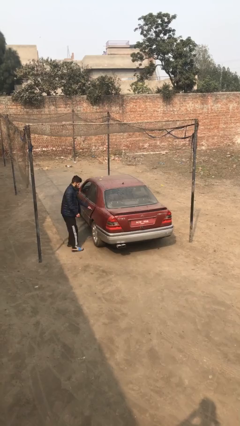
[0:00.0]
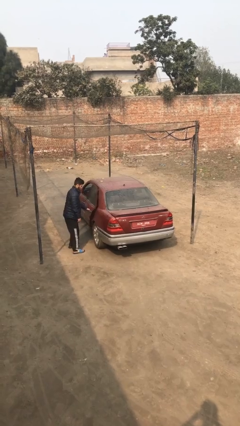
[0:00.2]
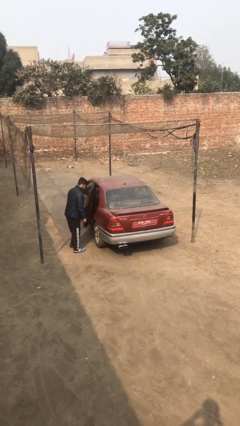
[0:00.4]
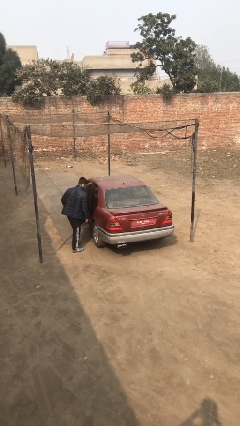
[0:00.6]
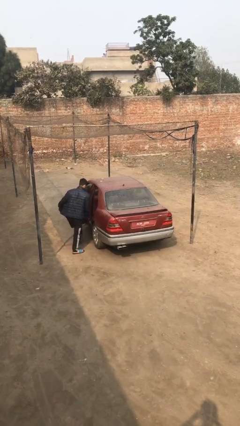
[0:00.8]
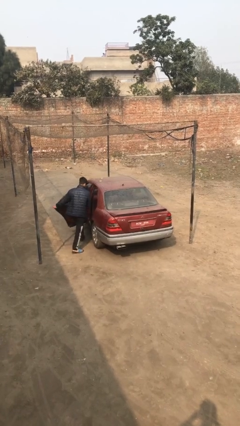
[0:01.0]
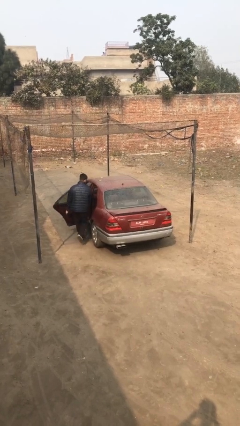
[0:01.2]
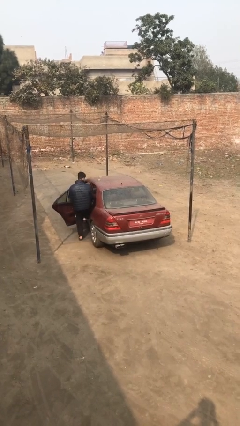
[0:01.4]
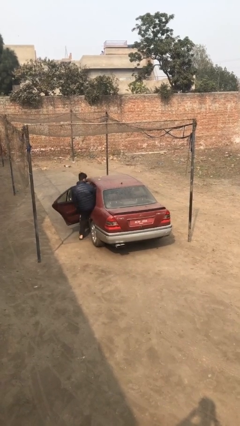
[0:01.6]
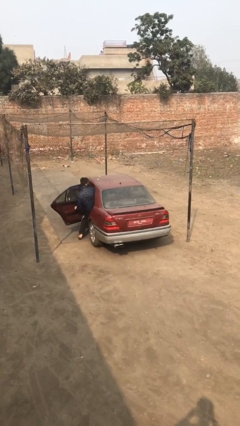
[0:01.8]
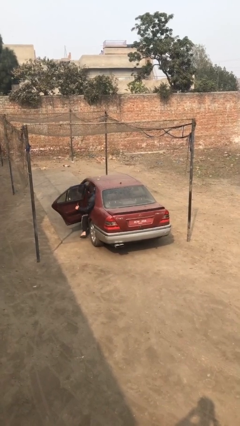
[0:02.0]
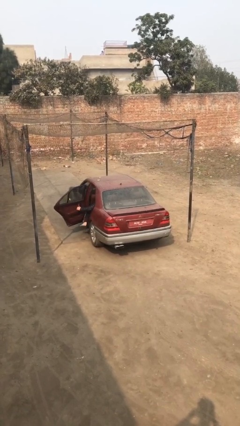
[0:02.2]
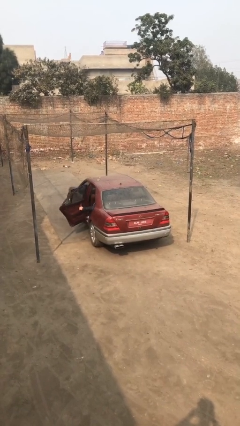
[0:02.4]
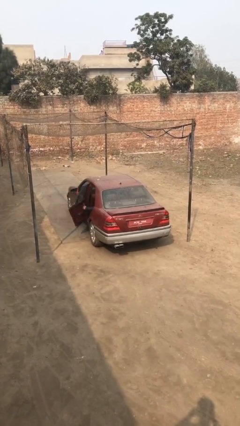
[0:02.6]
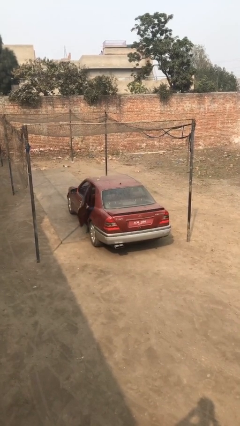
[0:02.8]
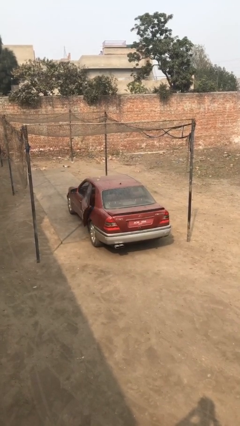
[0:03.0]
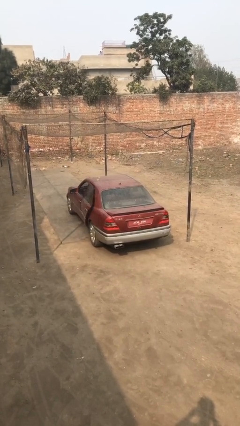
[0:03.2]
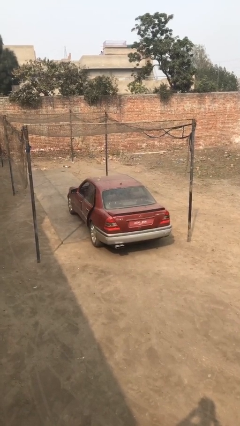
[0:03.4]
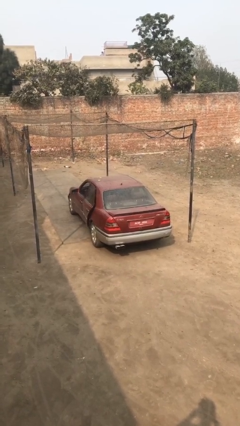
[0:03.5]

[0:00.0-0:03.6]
car picks up person

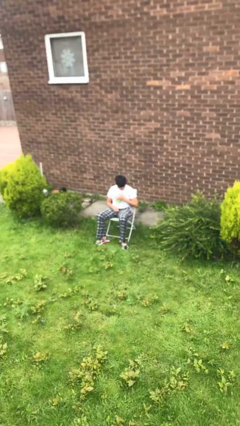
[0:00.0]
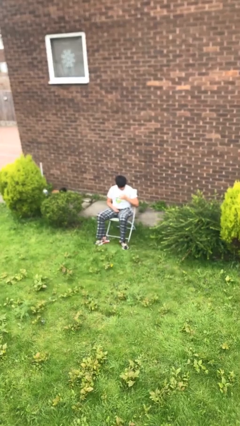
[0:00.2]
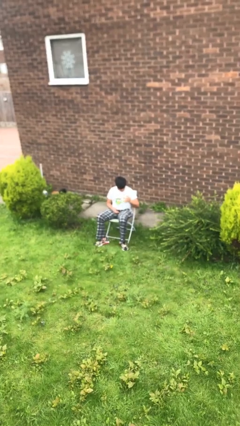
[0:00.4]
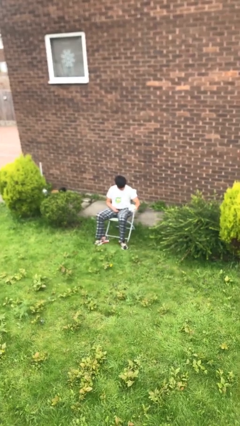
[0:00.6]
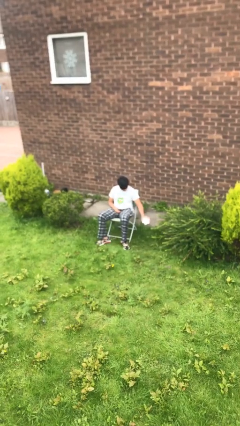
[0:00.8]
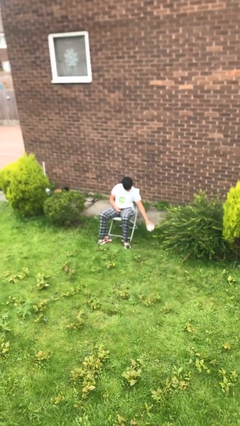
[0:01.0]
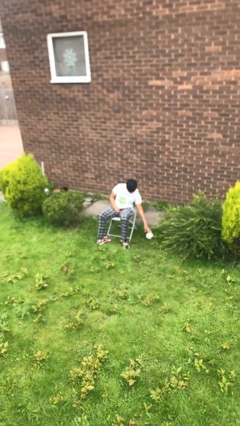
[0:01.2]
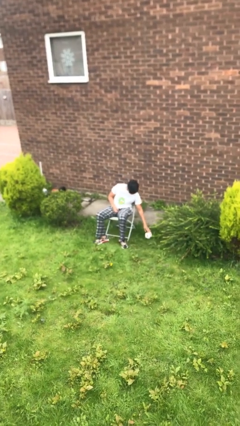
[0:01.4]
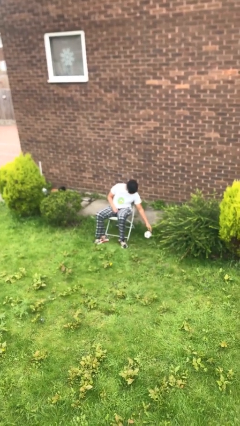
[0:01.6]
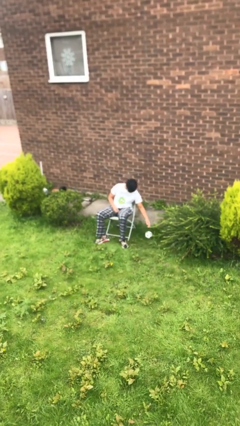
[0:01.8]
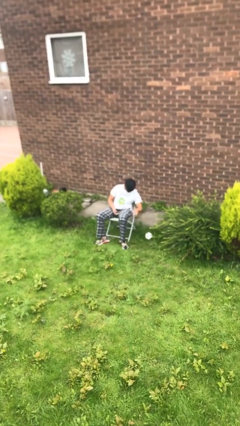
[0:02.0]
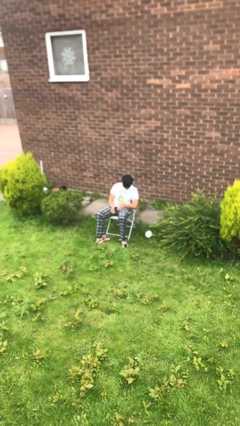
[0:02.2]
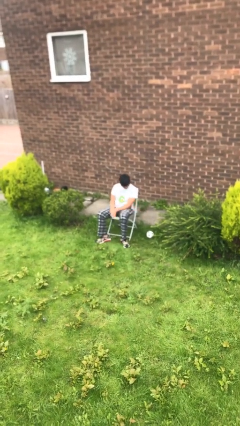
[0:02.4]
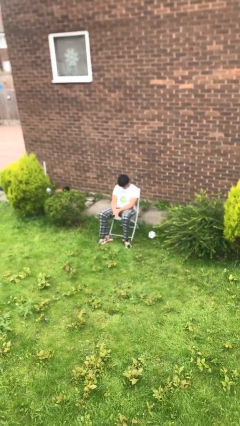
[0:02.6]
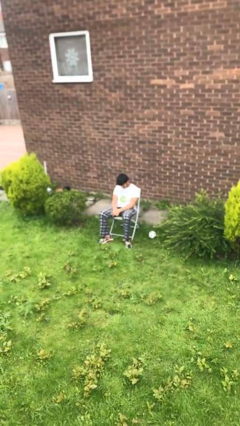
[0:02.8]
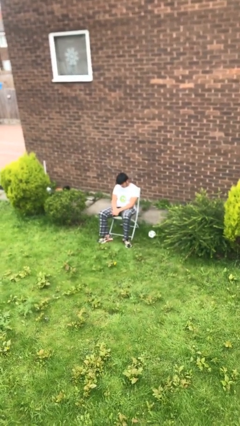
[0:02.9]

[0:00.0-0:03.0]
person puts down object on floor

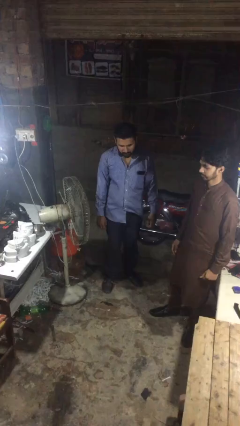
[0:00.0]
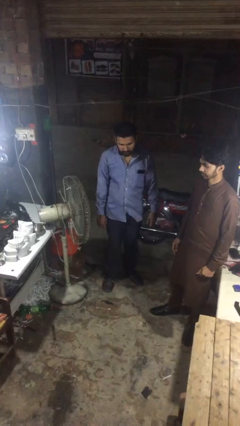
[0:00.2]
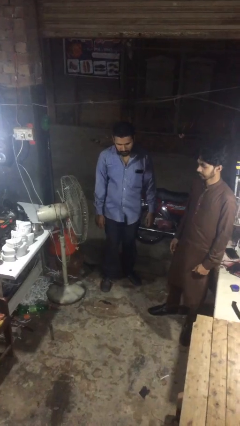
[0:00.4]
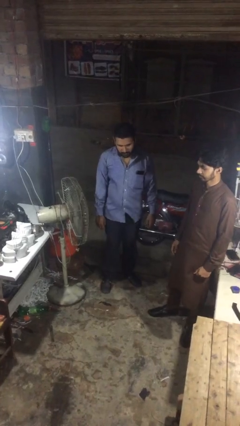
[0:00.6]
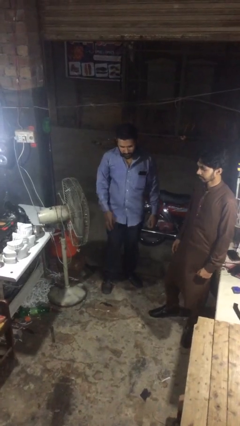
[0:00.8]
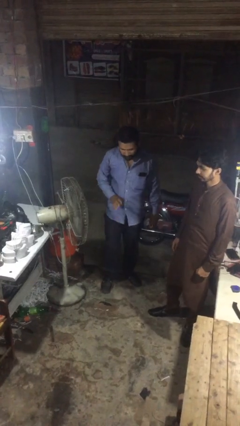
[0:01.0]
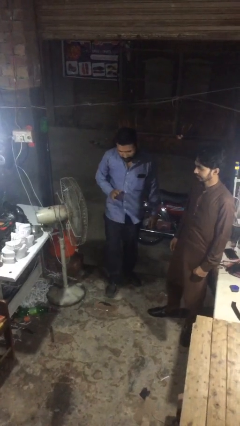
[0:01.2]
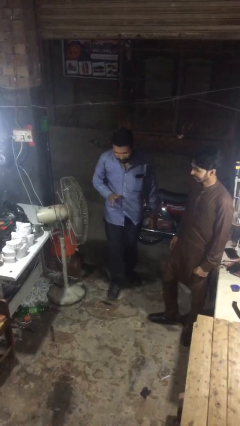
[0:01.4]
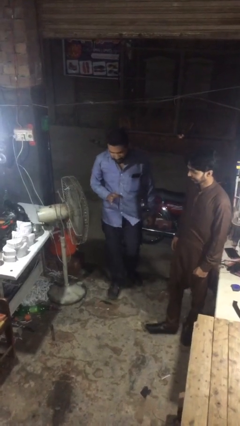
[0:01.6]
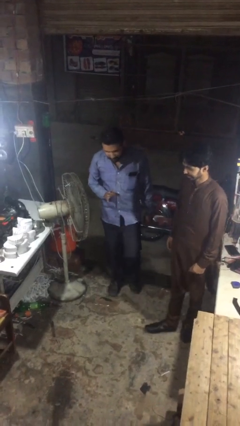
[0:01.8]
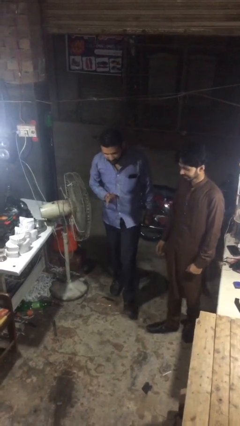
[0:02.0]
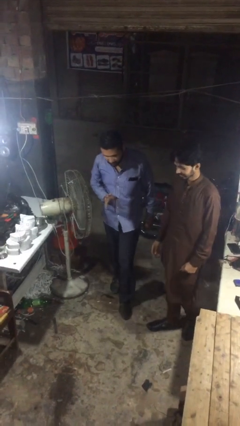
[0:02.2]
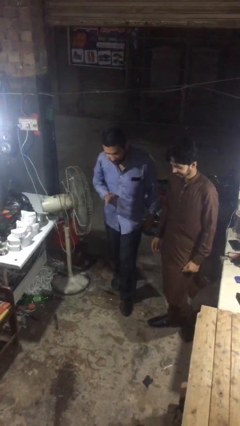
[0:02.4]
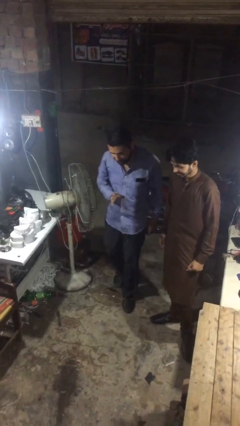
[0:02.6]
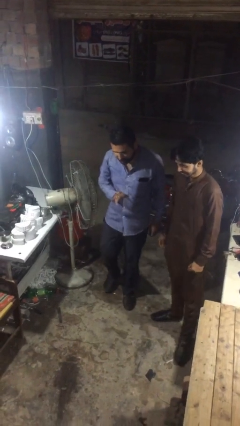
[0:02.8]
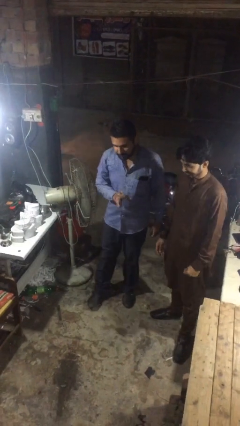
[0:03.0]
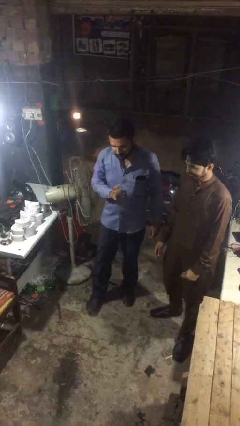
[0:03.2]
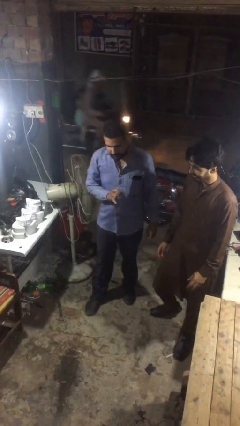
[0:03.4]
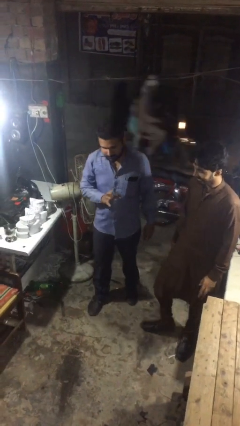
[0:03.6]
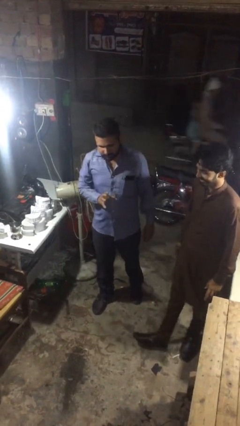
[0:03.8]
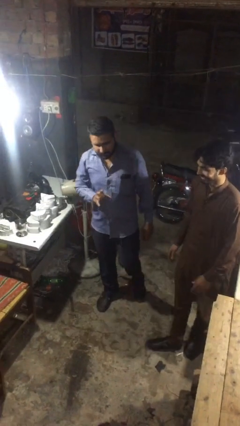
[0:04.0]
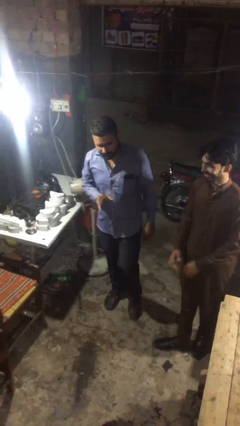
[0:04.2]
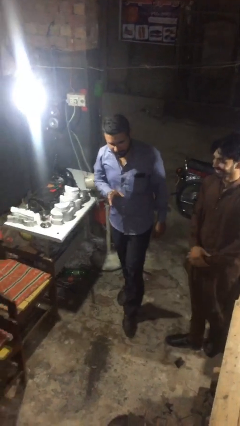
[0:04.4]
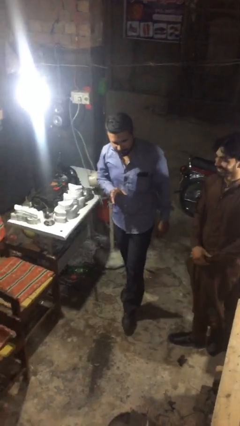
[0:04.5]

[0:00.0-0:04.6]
person talks to person

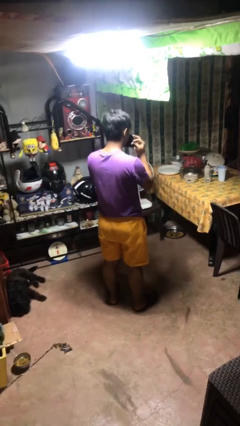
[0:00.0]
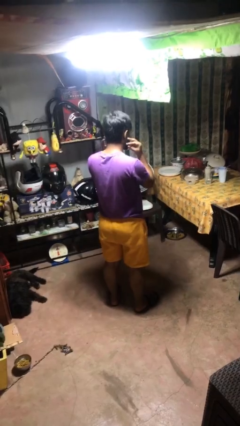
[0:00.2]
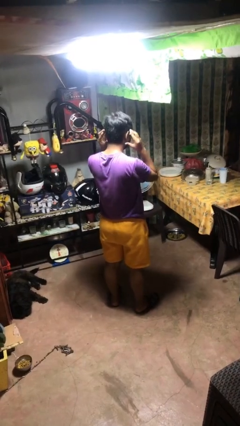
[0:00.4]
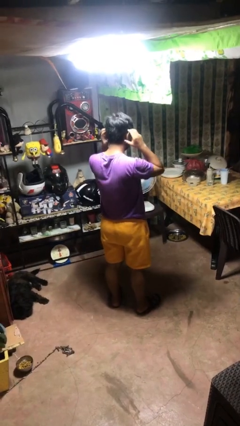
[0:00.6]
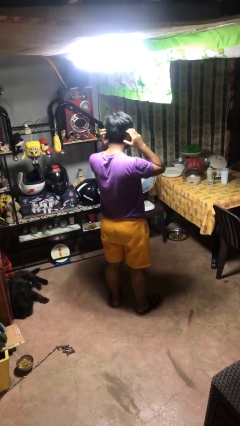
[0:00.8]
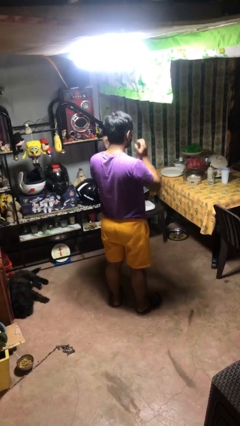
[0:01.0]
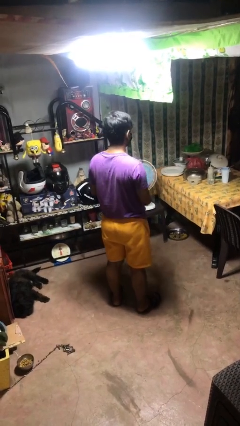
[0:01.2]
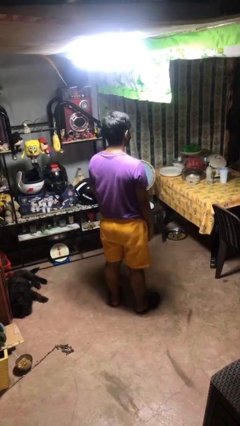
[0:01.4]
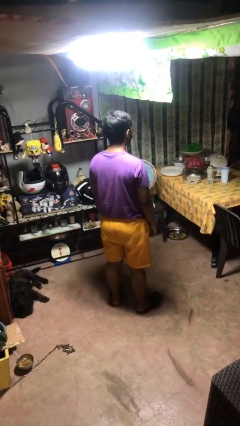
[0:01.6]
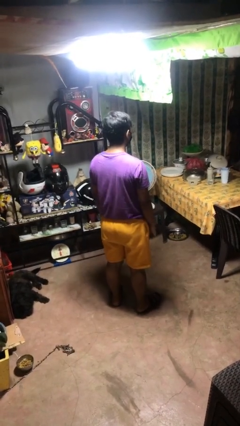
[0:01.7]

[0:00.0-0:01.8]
person puts on facemask

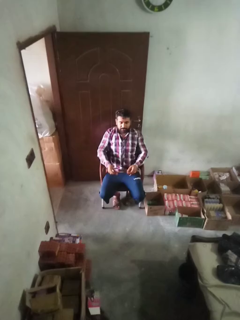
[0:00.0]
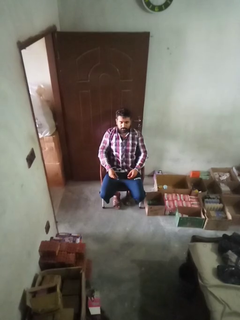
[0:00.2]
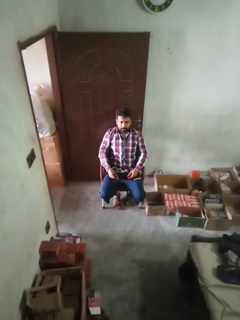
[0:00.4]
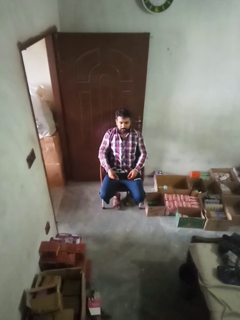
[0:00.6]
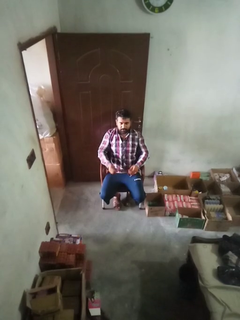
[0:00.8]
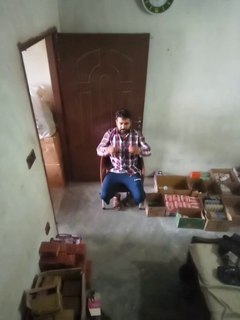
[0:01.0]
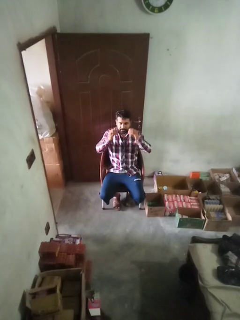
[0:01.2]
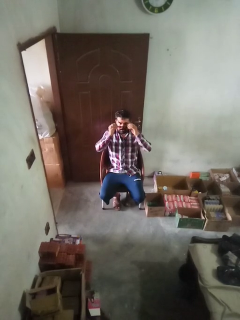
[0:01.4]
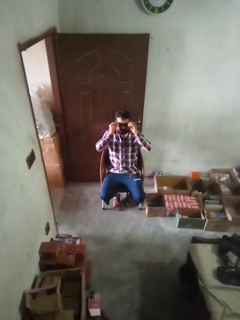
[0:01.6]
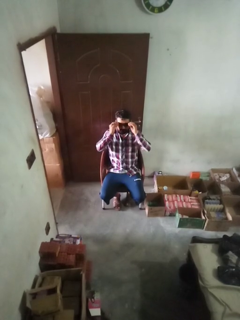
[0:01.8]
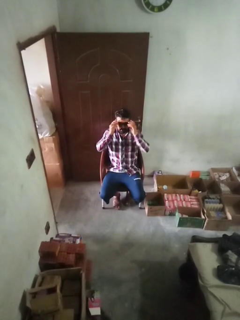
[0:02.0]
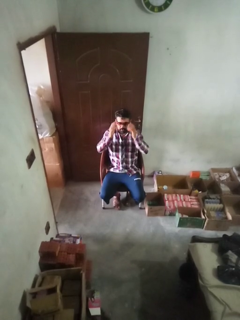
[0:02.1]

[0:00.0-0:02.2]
person puts on sunglasses

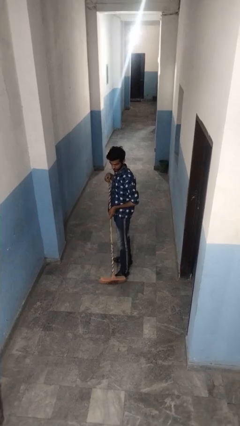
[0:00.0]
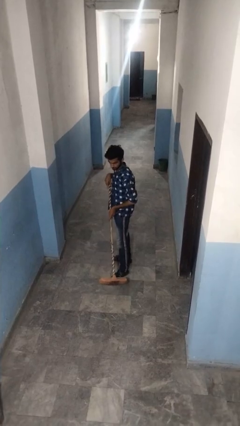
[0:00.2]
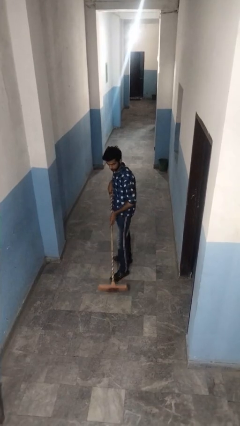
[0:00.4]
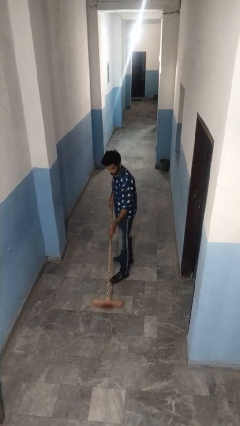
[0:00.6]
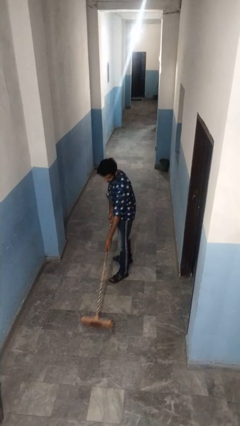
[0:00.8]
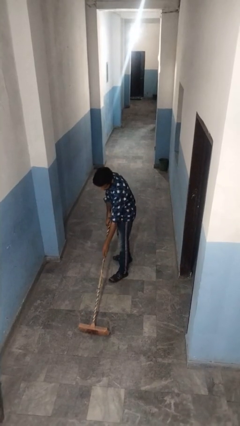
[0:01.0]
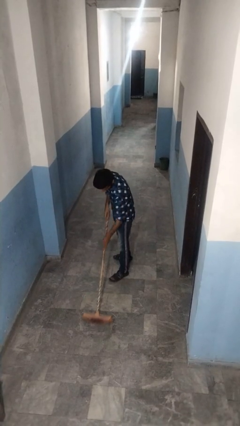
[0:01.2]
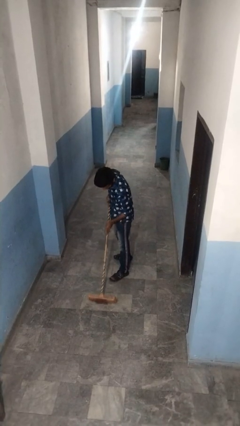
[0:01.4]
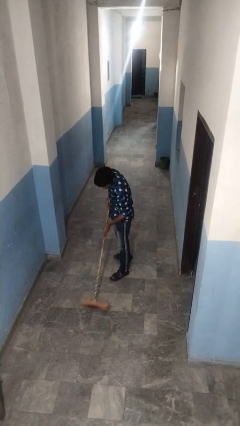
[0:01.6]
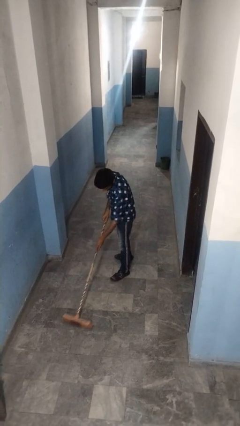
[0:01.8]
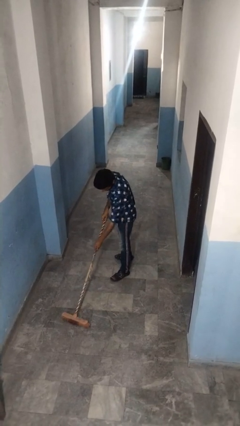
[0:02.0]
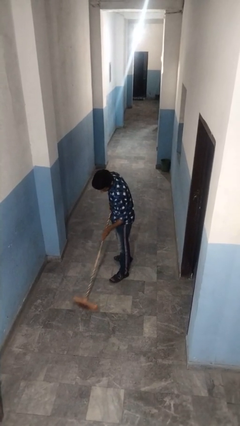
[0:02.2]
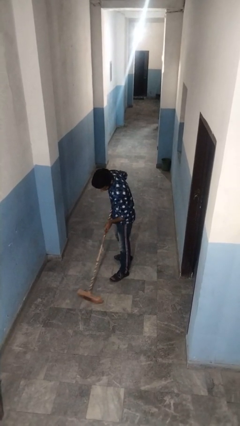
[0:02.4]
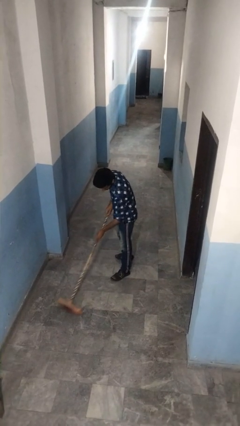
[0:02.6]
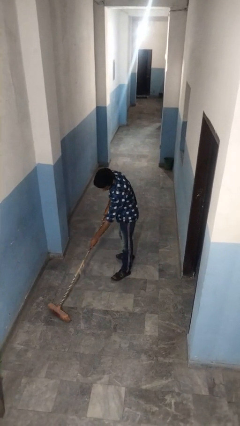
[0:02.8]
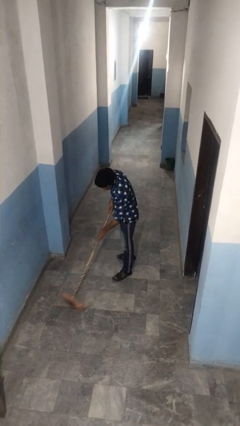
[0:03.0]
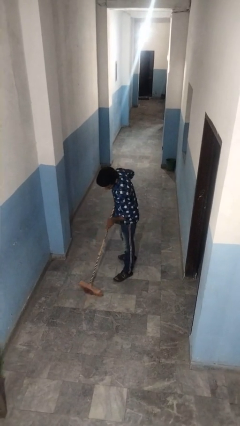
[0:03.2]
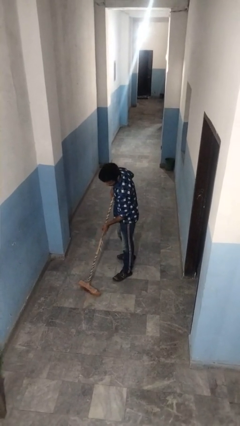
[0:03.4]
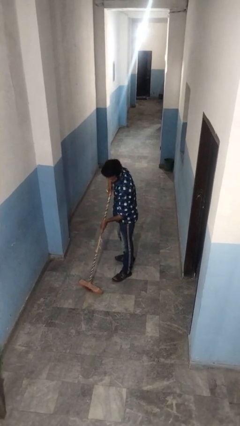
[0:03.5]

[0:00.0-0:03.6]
person sweeps floor
